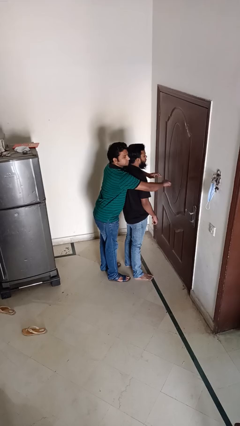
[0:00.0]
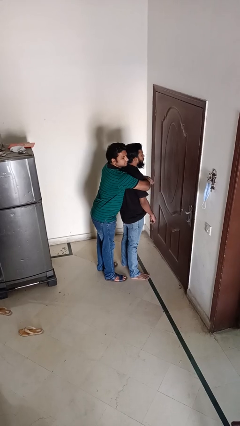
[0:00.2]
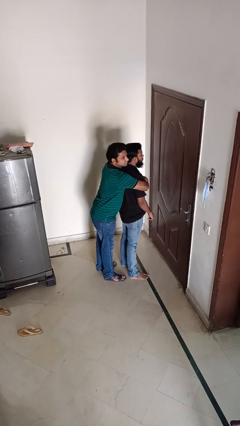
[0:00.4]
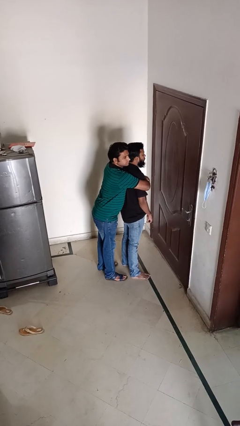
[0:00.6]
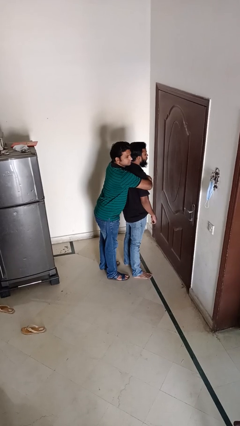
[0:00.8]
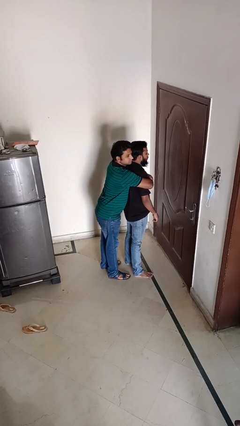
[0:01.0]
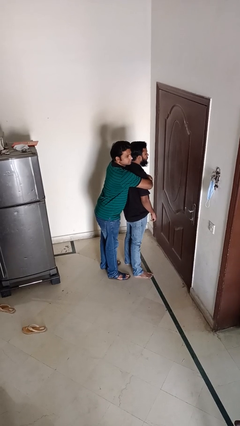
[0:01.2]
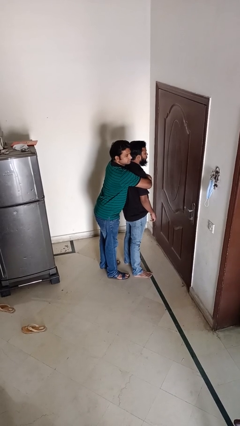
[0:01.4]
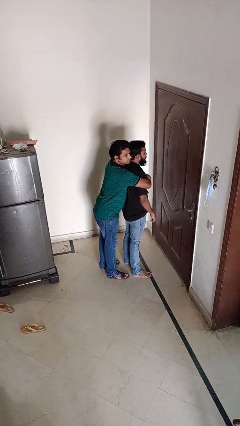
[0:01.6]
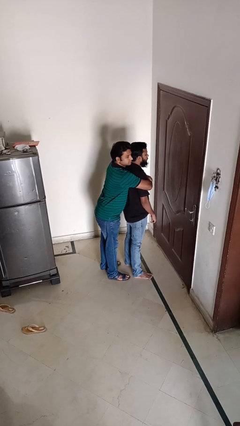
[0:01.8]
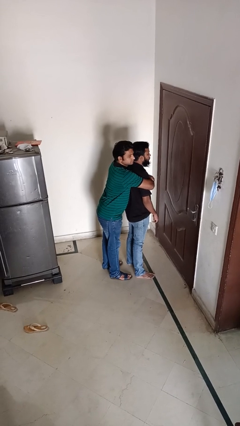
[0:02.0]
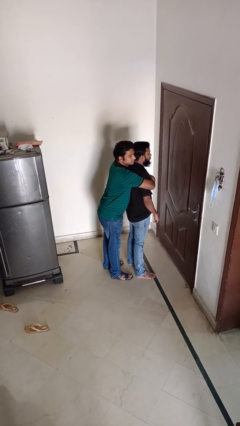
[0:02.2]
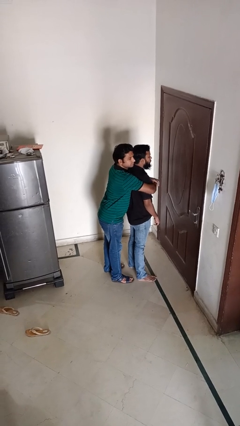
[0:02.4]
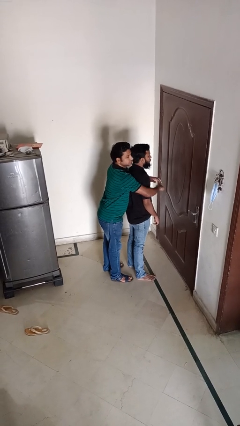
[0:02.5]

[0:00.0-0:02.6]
person hugs person from behind

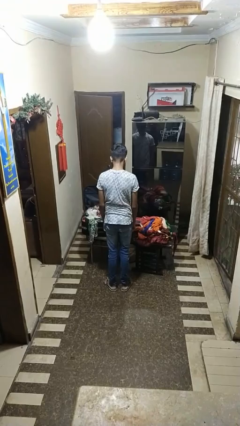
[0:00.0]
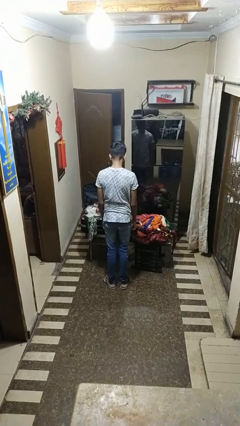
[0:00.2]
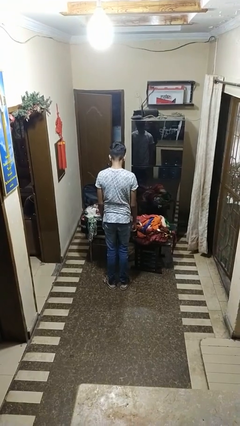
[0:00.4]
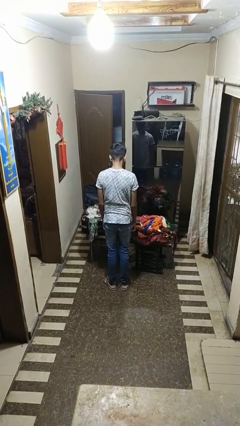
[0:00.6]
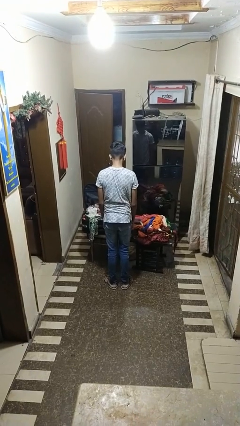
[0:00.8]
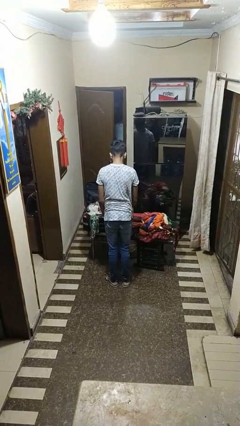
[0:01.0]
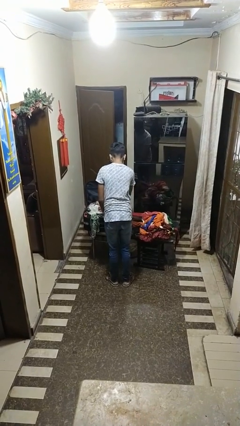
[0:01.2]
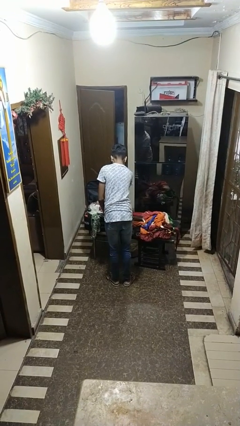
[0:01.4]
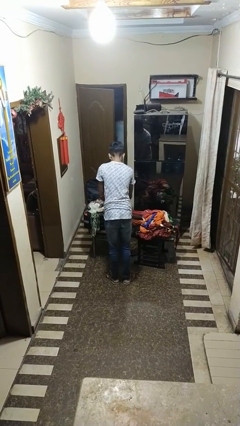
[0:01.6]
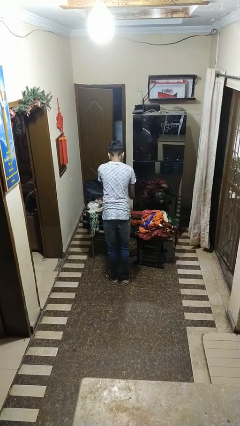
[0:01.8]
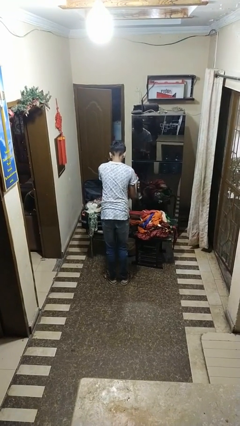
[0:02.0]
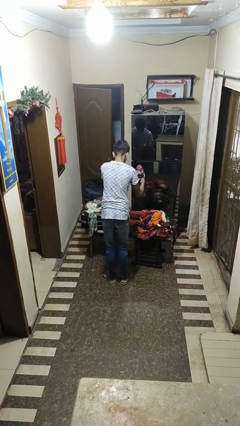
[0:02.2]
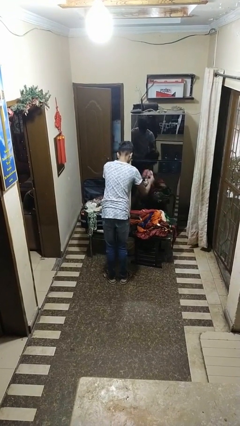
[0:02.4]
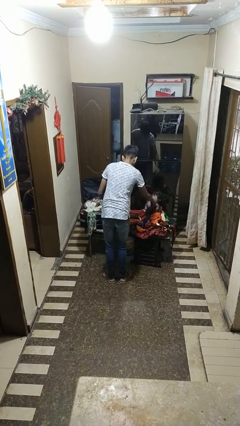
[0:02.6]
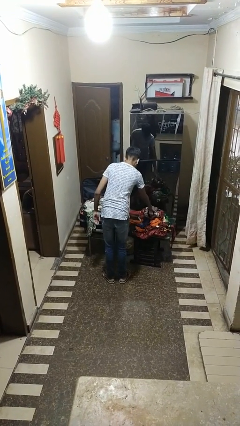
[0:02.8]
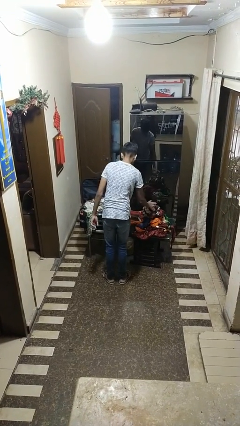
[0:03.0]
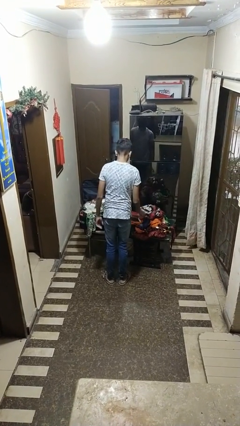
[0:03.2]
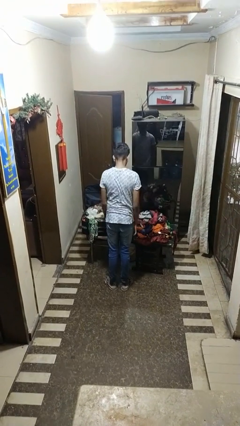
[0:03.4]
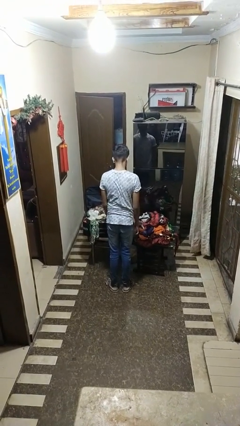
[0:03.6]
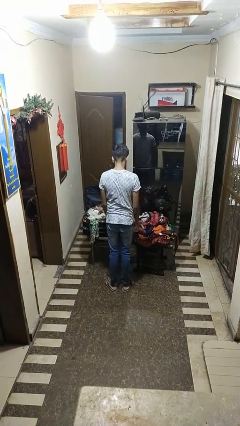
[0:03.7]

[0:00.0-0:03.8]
person unloads clothes from suitcase

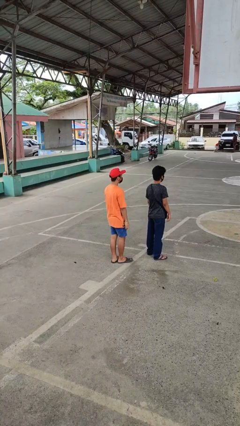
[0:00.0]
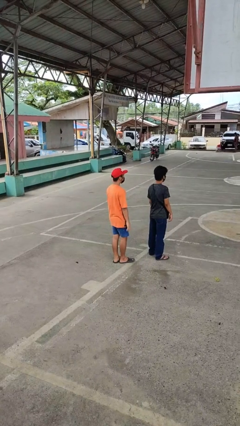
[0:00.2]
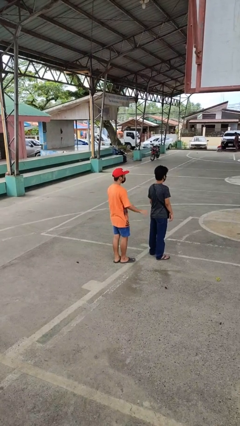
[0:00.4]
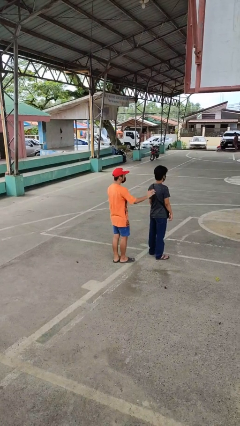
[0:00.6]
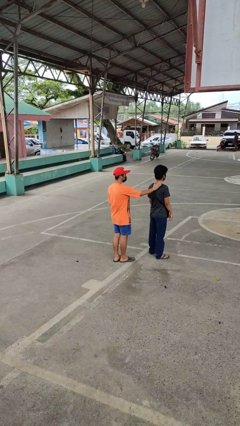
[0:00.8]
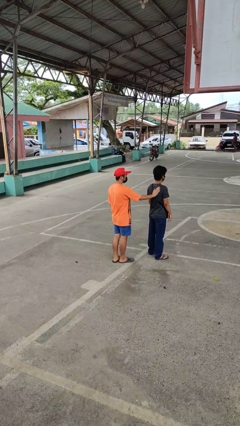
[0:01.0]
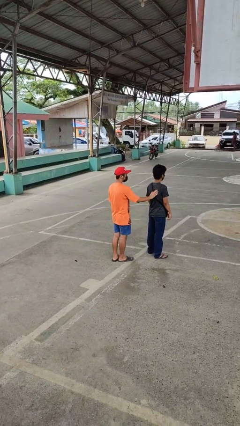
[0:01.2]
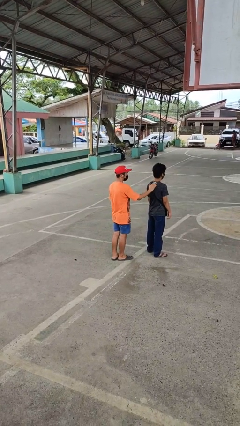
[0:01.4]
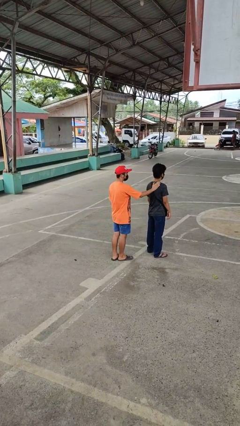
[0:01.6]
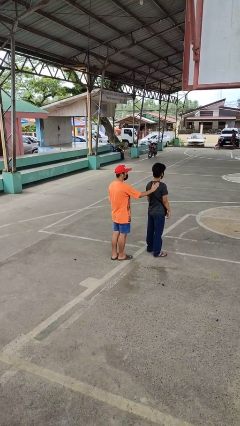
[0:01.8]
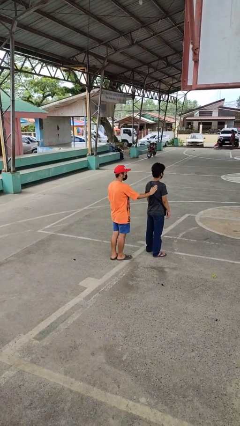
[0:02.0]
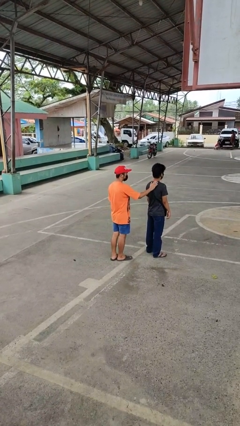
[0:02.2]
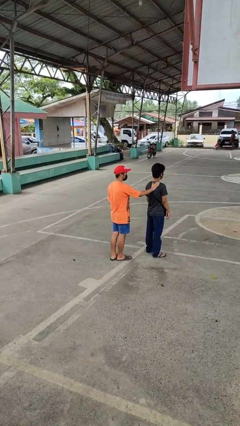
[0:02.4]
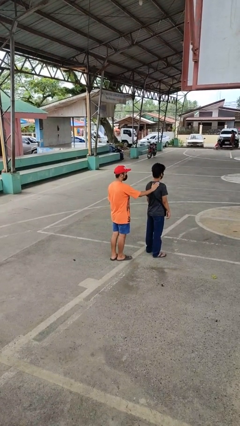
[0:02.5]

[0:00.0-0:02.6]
person touches back of person

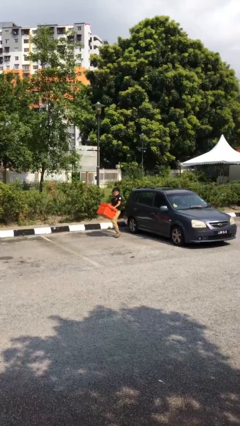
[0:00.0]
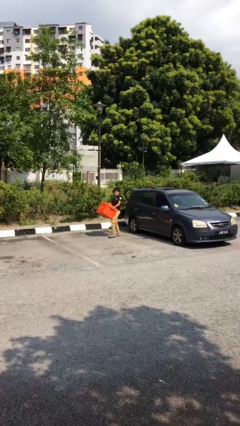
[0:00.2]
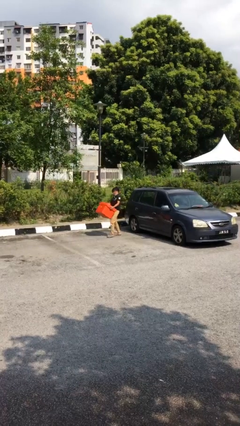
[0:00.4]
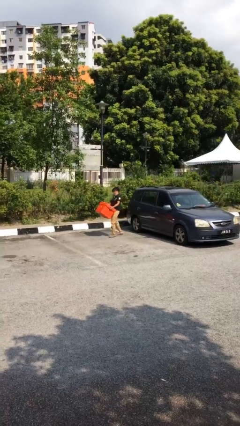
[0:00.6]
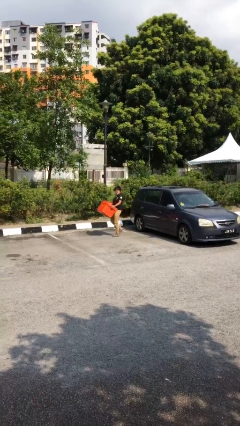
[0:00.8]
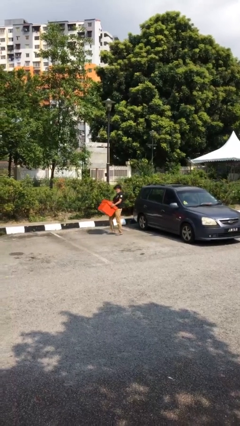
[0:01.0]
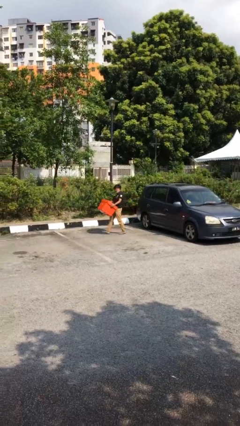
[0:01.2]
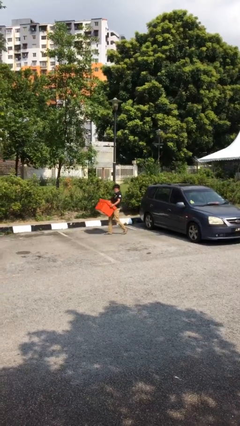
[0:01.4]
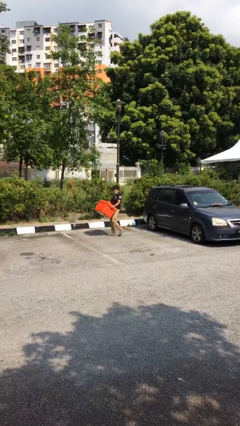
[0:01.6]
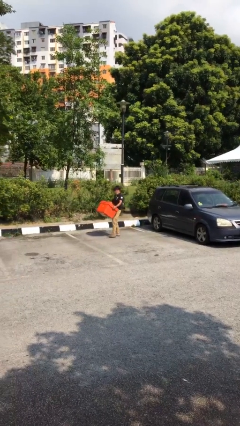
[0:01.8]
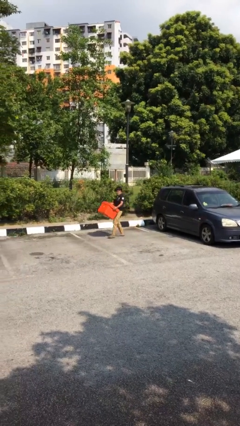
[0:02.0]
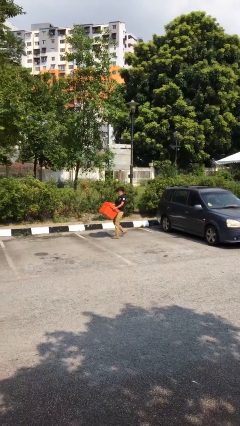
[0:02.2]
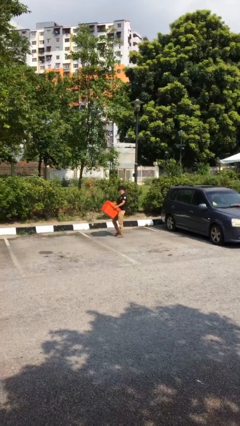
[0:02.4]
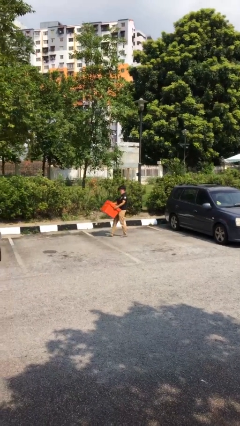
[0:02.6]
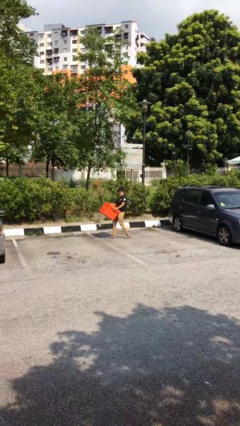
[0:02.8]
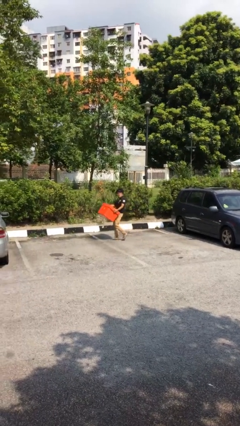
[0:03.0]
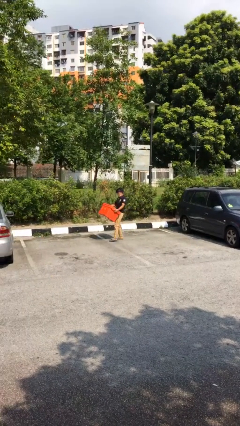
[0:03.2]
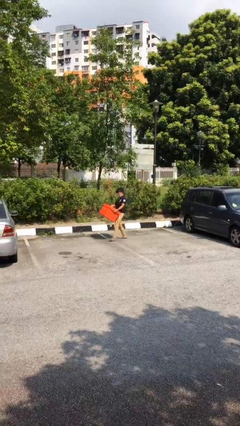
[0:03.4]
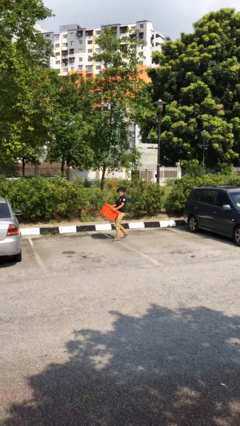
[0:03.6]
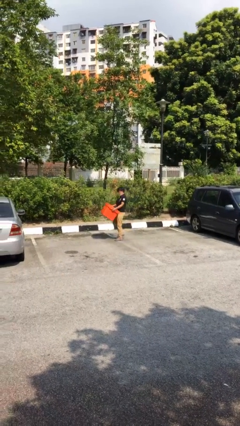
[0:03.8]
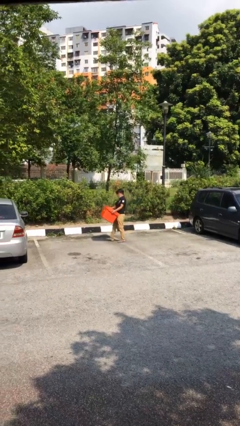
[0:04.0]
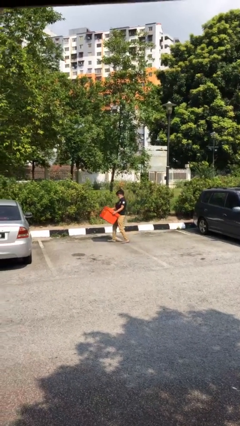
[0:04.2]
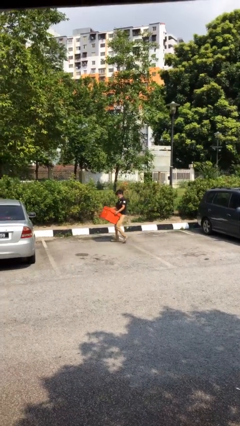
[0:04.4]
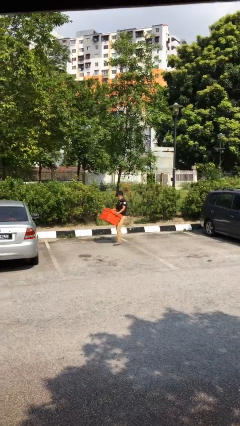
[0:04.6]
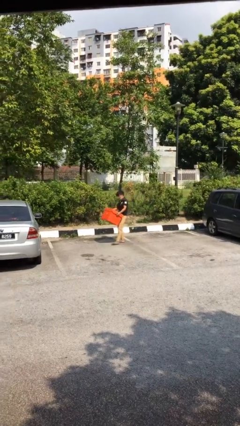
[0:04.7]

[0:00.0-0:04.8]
person carries heavy object

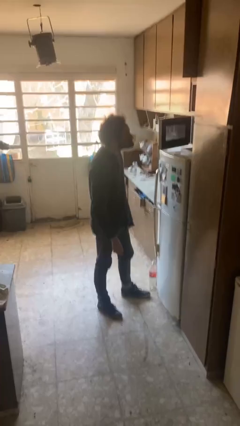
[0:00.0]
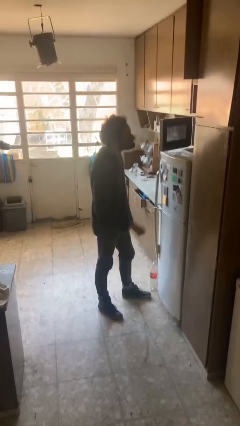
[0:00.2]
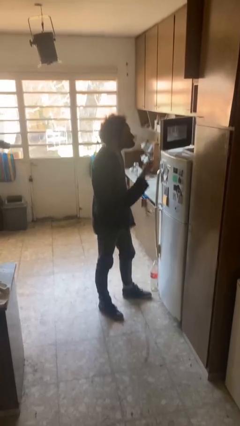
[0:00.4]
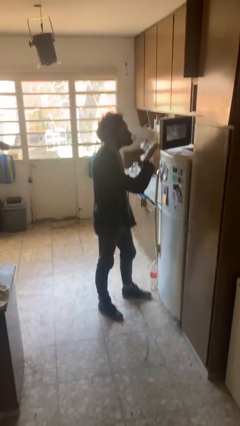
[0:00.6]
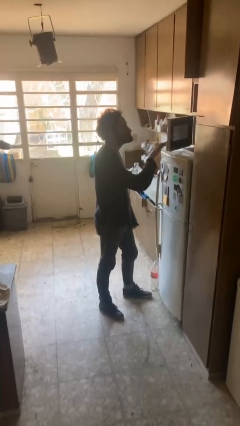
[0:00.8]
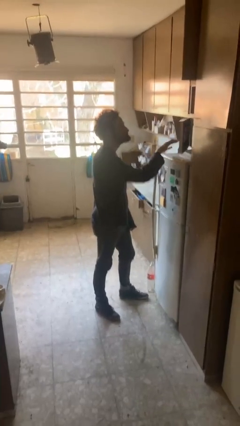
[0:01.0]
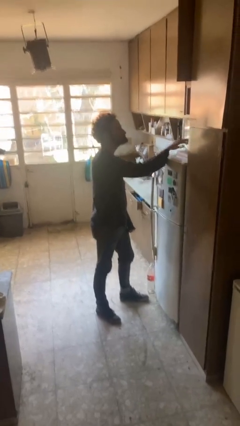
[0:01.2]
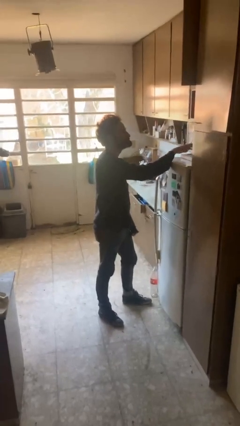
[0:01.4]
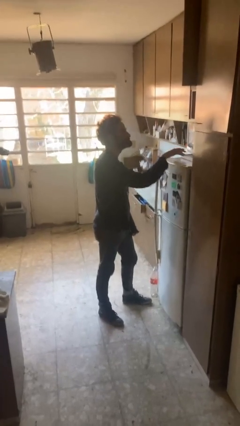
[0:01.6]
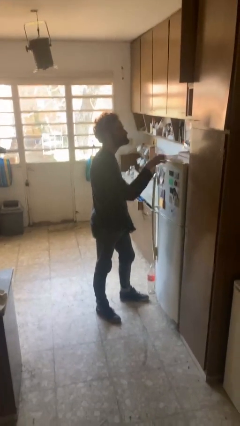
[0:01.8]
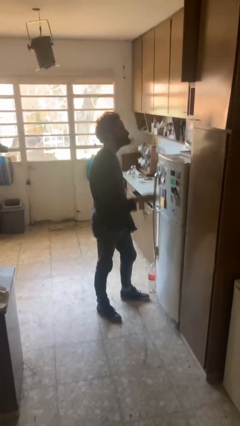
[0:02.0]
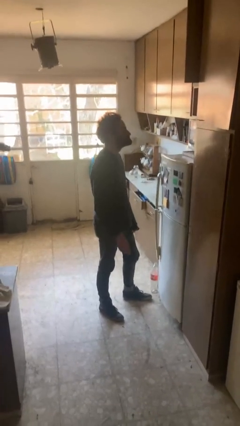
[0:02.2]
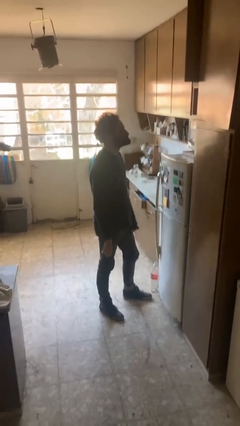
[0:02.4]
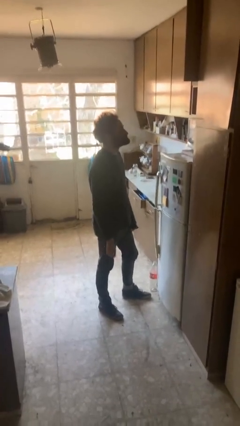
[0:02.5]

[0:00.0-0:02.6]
person closes microwave

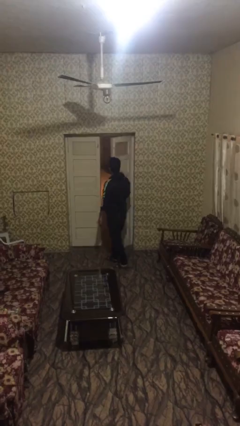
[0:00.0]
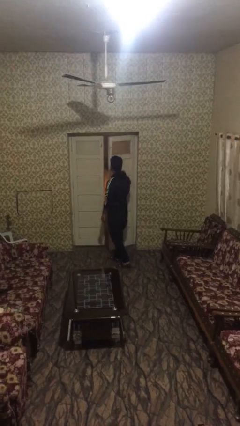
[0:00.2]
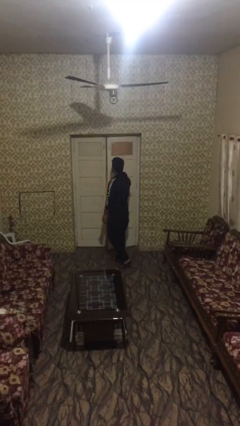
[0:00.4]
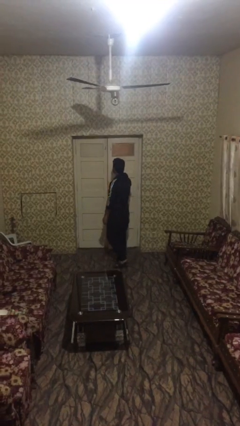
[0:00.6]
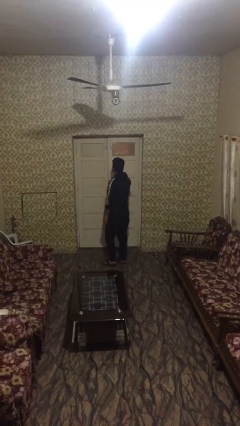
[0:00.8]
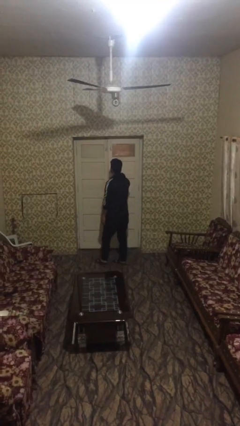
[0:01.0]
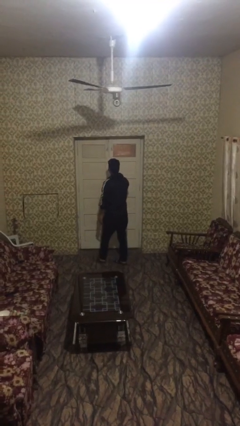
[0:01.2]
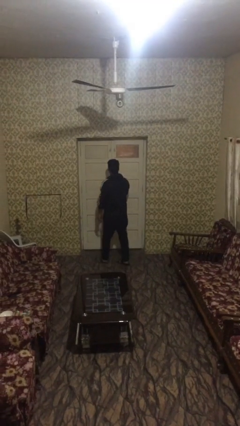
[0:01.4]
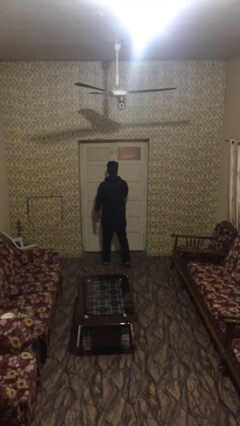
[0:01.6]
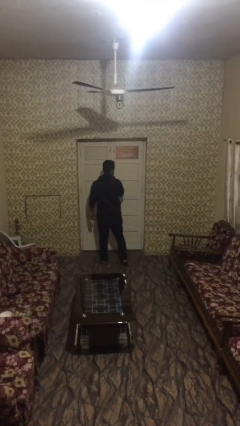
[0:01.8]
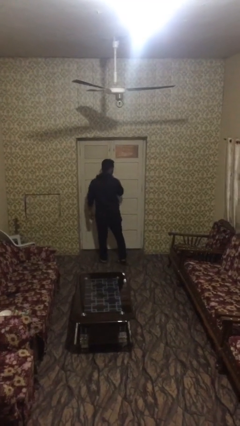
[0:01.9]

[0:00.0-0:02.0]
person closes facility door
